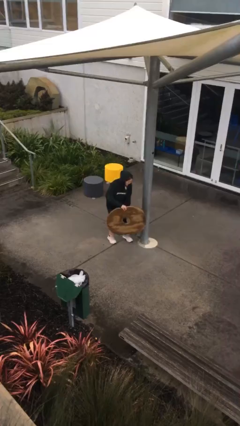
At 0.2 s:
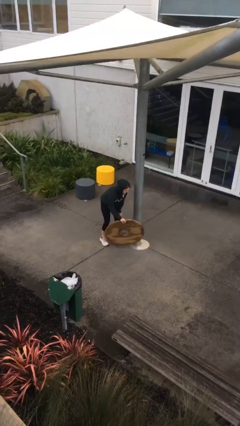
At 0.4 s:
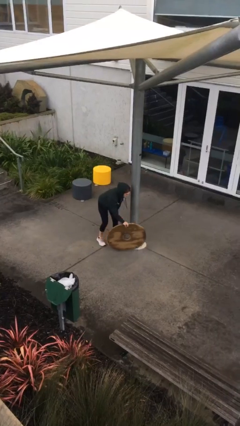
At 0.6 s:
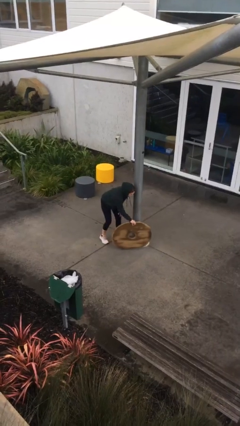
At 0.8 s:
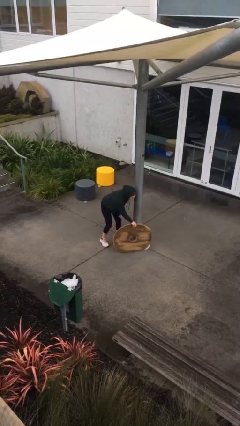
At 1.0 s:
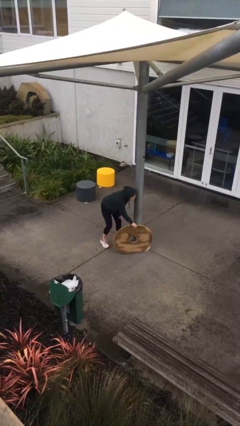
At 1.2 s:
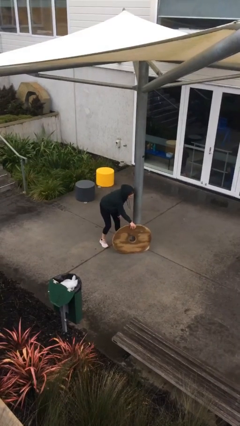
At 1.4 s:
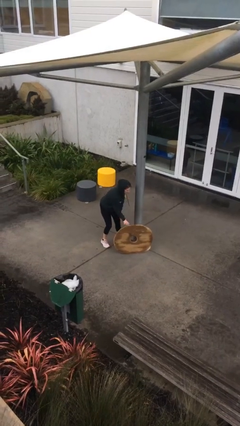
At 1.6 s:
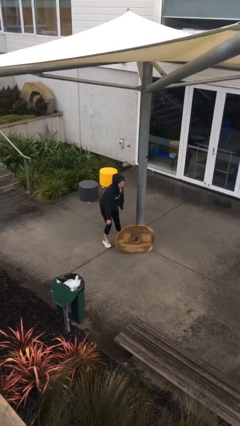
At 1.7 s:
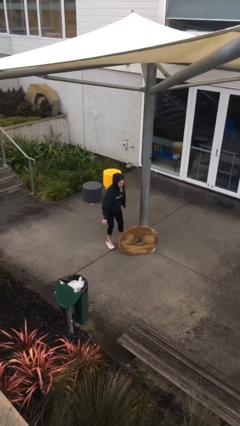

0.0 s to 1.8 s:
person puts down object on floor

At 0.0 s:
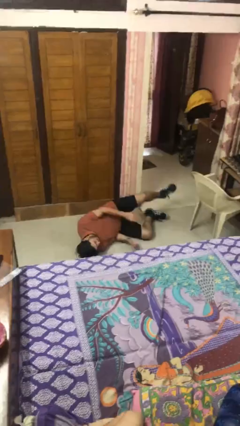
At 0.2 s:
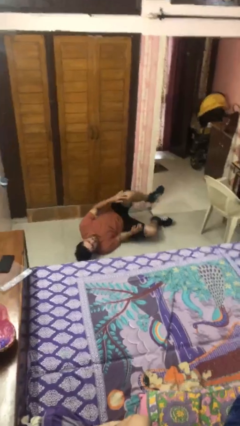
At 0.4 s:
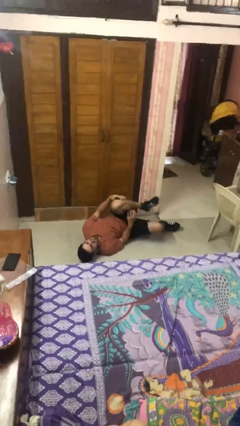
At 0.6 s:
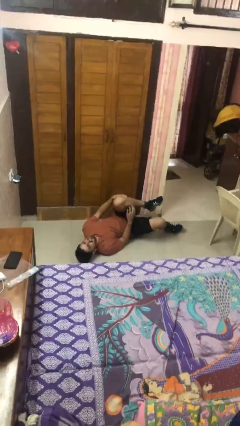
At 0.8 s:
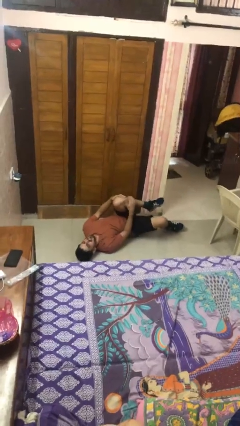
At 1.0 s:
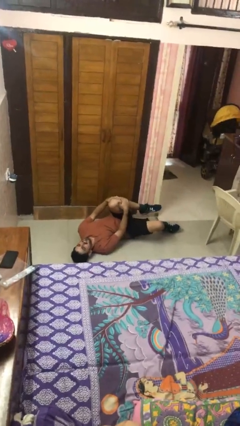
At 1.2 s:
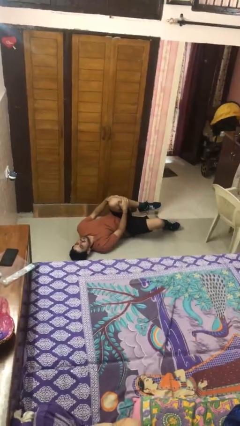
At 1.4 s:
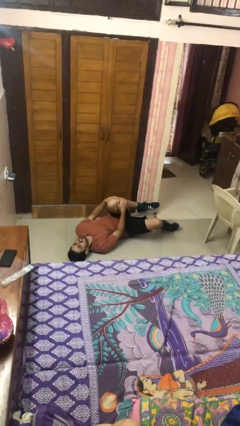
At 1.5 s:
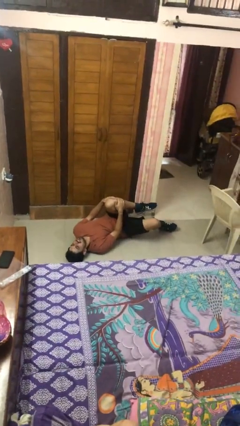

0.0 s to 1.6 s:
person lies down on floor

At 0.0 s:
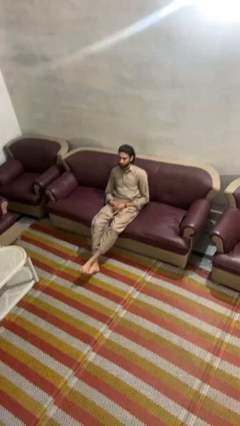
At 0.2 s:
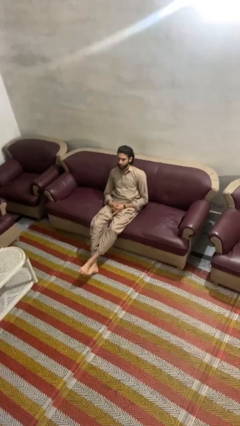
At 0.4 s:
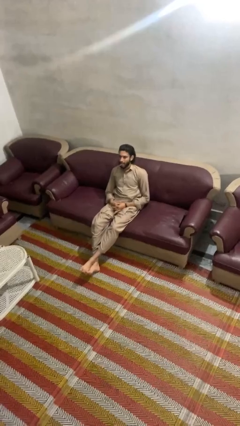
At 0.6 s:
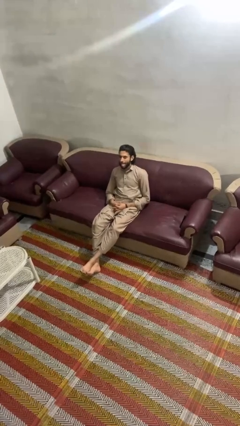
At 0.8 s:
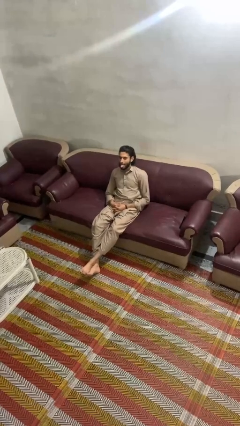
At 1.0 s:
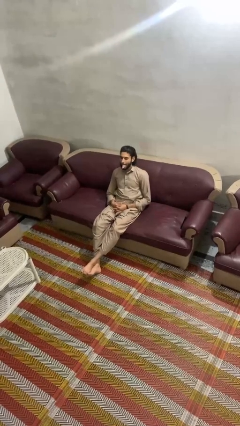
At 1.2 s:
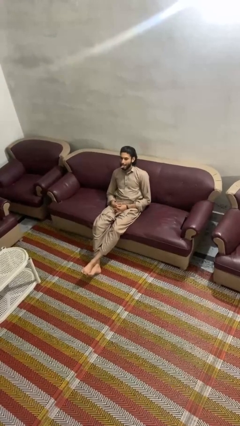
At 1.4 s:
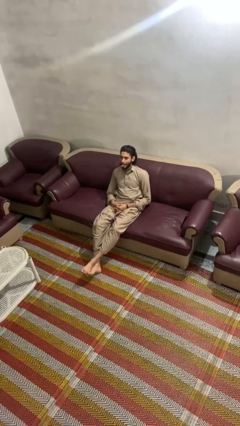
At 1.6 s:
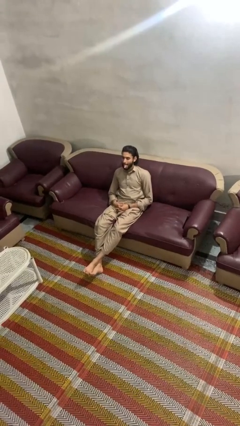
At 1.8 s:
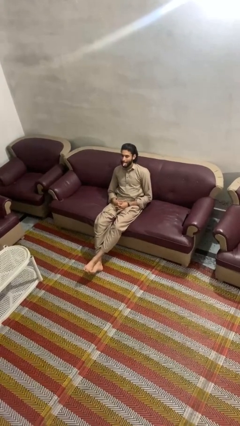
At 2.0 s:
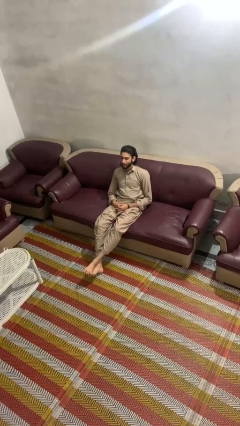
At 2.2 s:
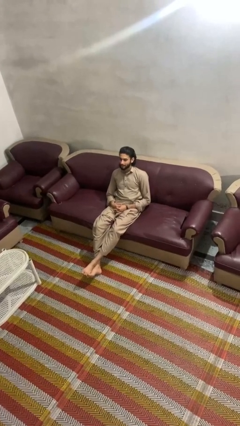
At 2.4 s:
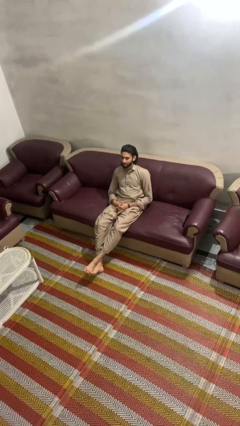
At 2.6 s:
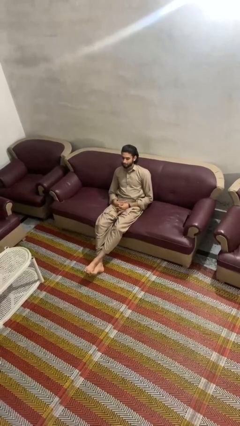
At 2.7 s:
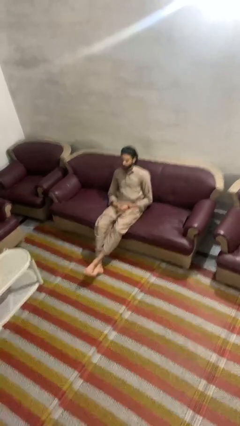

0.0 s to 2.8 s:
person sticks out tongue

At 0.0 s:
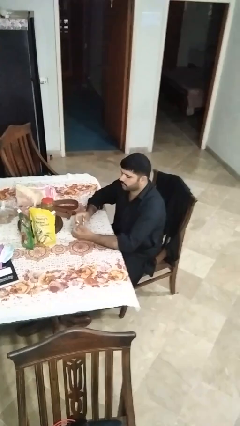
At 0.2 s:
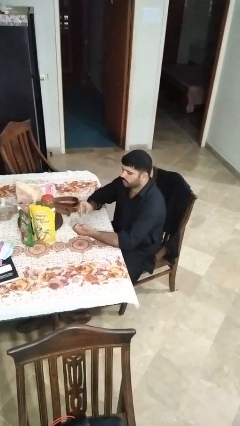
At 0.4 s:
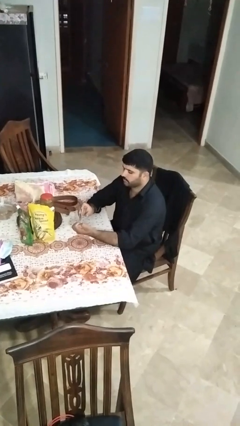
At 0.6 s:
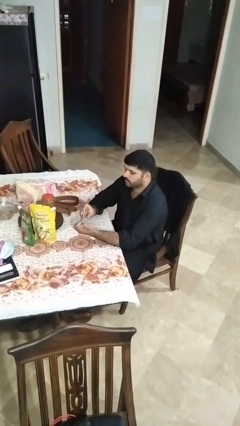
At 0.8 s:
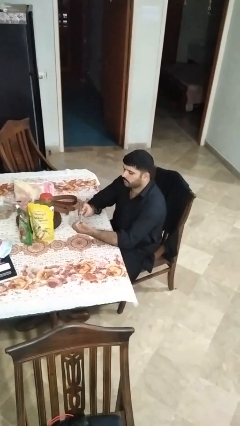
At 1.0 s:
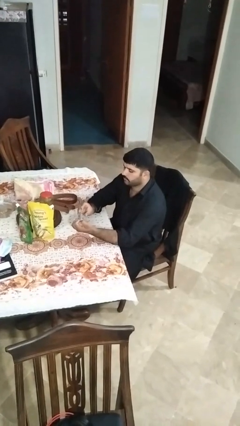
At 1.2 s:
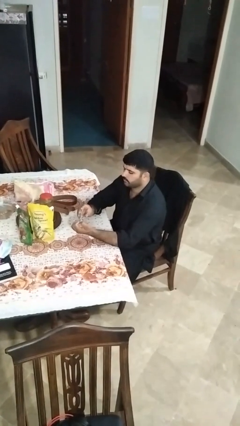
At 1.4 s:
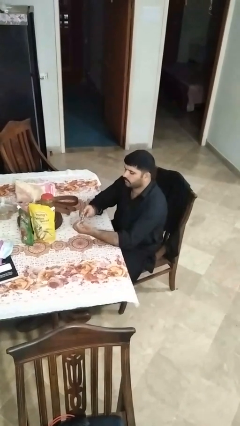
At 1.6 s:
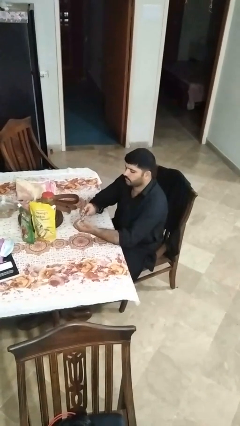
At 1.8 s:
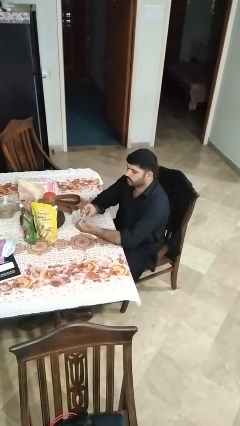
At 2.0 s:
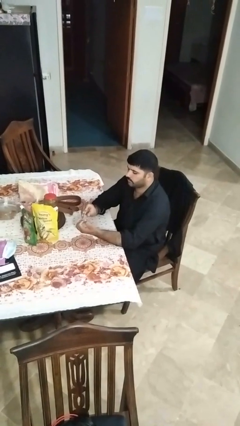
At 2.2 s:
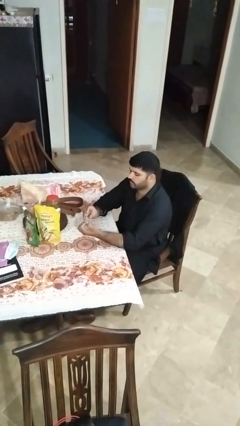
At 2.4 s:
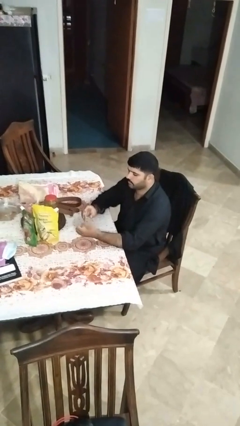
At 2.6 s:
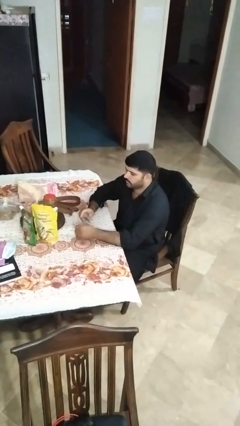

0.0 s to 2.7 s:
person clips fingernails

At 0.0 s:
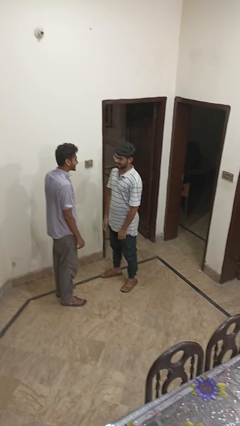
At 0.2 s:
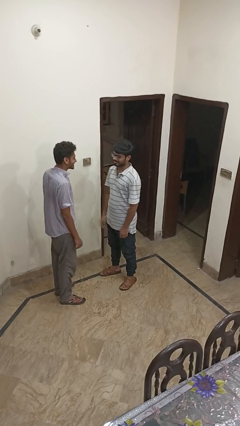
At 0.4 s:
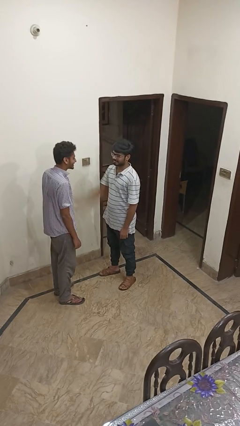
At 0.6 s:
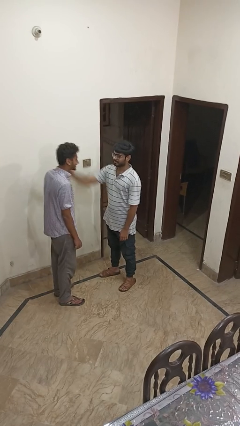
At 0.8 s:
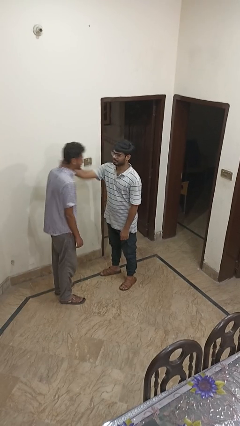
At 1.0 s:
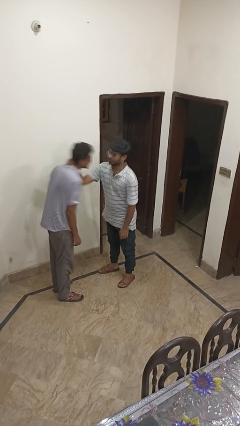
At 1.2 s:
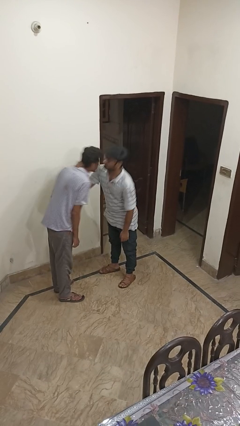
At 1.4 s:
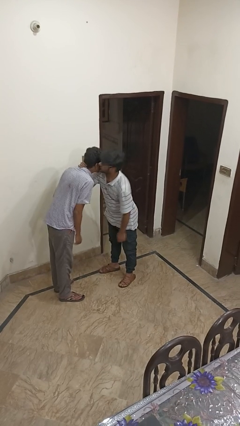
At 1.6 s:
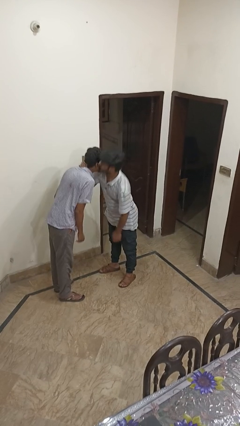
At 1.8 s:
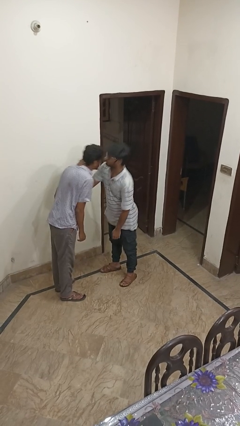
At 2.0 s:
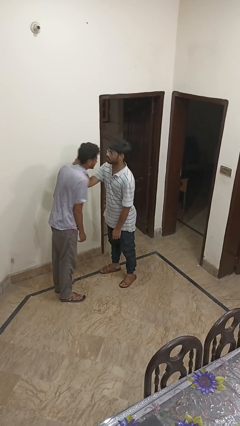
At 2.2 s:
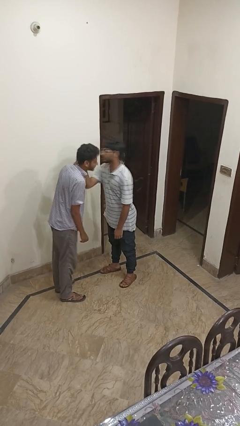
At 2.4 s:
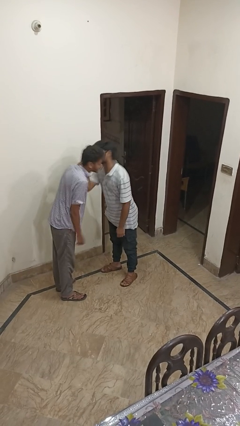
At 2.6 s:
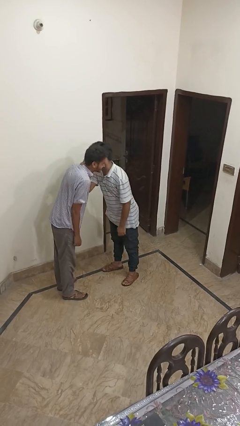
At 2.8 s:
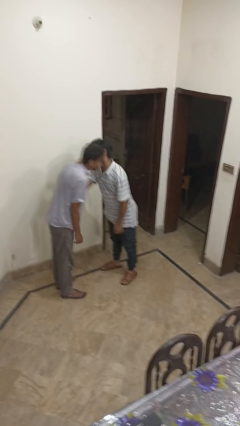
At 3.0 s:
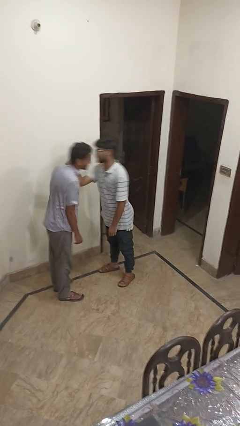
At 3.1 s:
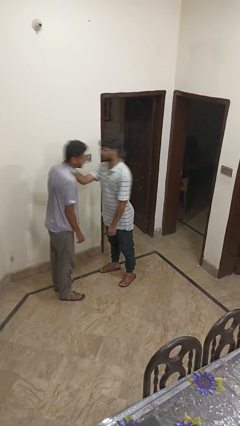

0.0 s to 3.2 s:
person kisses cheek of person

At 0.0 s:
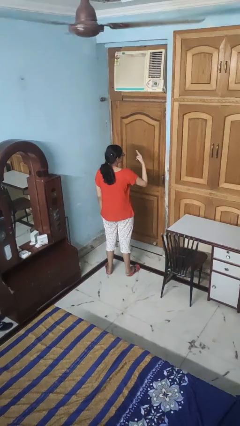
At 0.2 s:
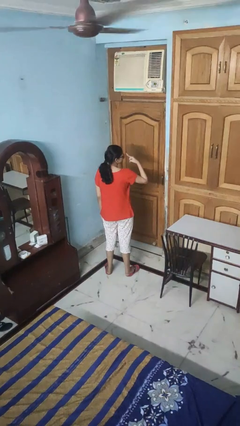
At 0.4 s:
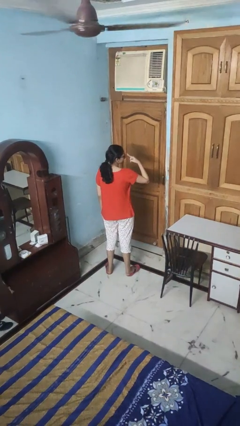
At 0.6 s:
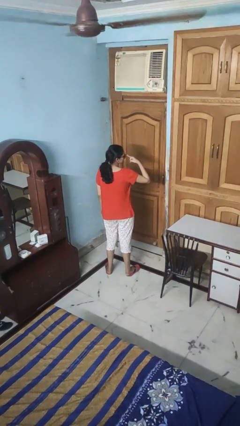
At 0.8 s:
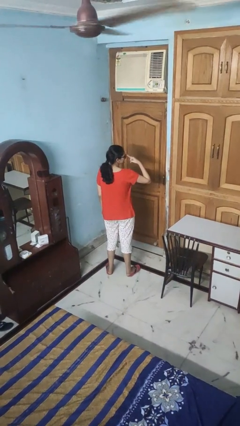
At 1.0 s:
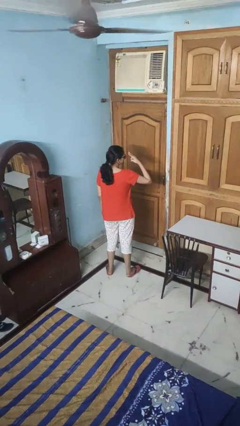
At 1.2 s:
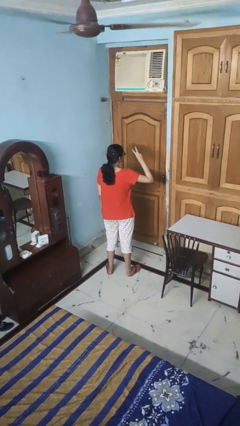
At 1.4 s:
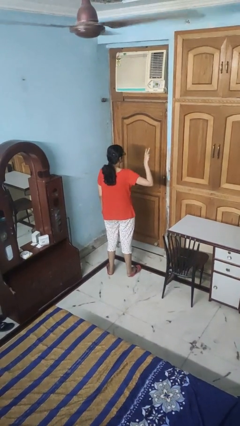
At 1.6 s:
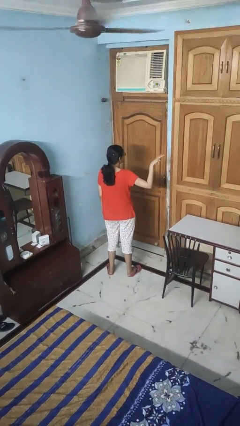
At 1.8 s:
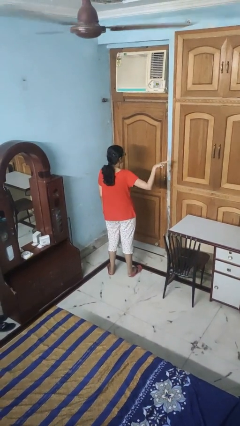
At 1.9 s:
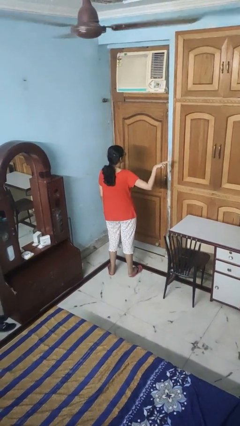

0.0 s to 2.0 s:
person gestures watch closely

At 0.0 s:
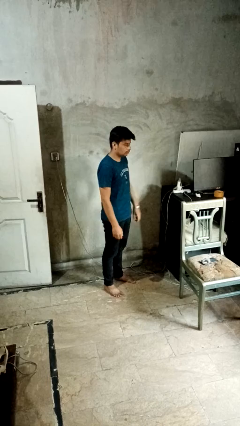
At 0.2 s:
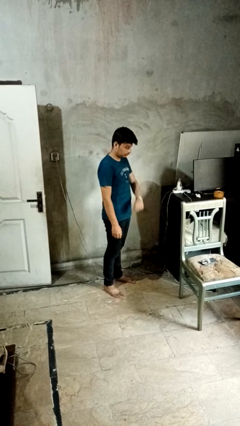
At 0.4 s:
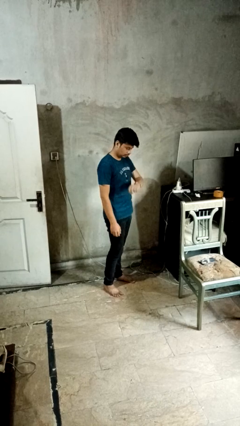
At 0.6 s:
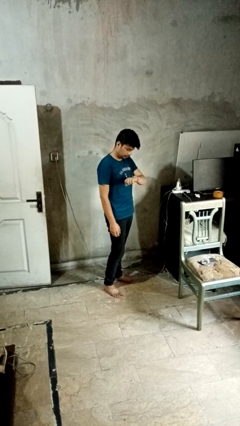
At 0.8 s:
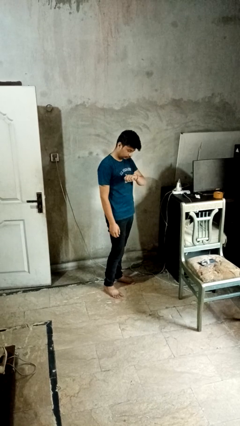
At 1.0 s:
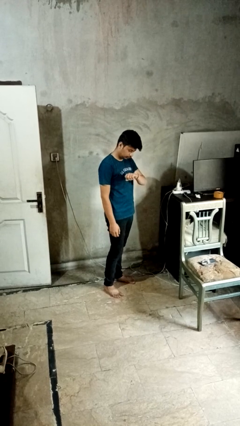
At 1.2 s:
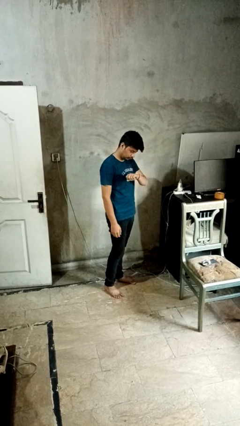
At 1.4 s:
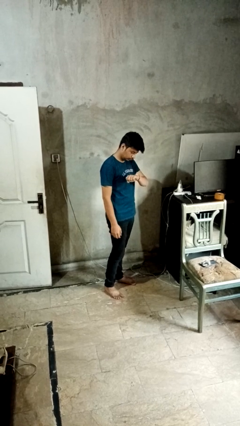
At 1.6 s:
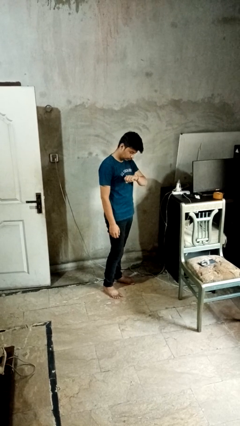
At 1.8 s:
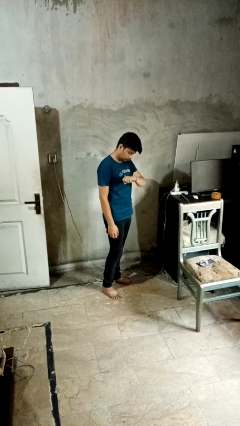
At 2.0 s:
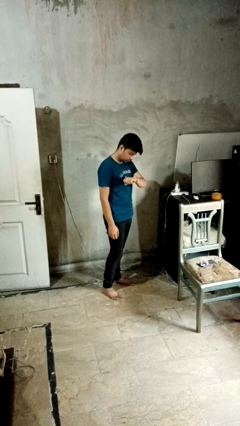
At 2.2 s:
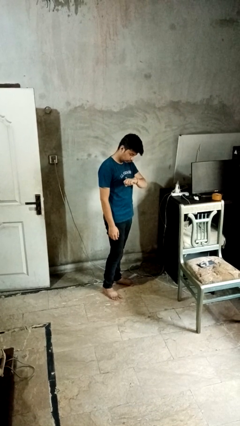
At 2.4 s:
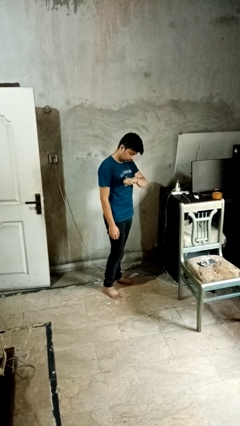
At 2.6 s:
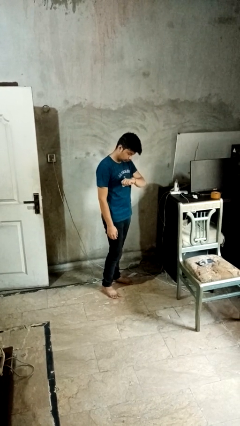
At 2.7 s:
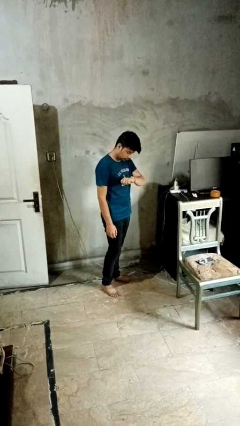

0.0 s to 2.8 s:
person looks at wristwatch

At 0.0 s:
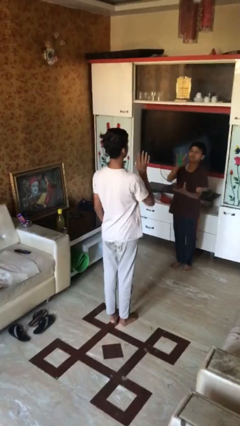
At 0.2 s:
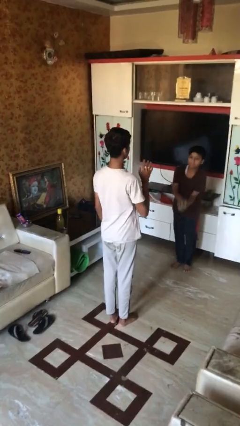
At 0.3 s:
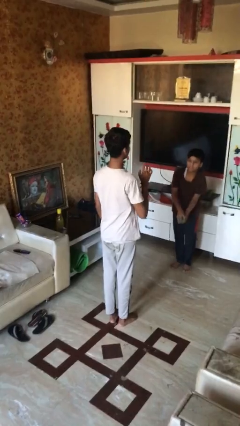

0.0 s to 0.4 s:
person throws object to person
